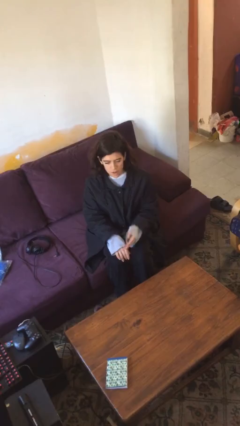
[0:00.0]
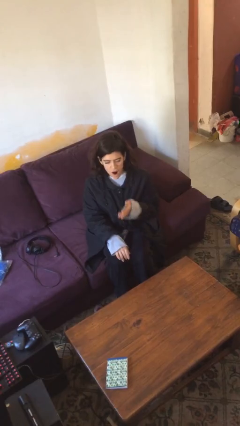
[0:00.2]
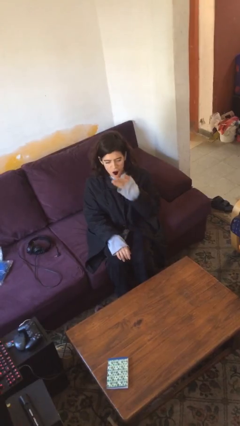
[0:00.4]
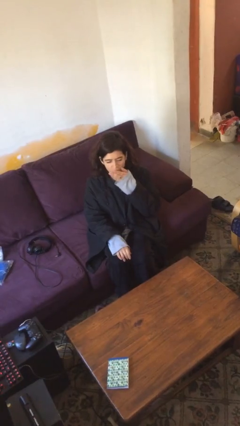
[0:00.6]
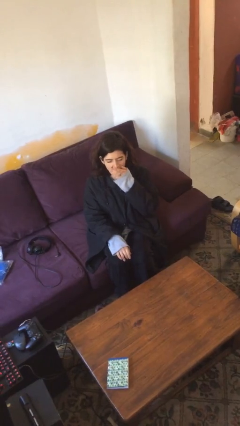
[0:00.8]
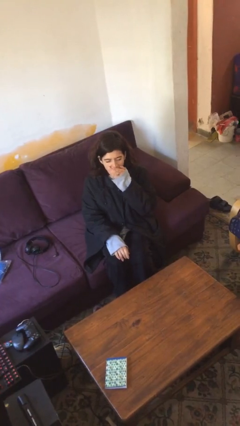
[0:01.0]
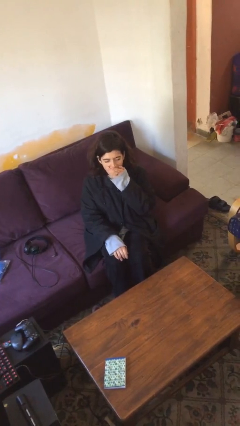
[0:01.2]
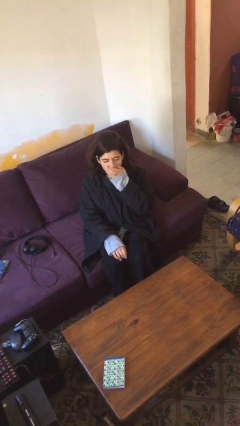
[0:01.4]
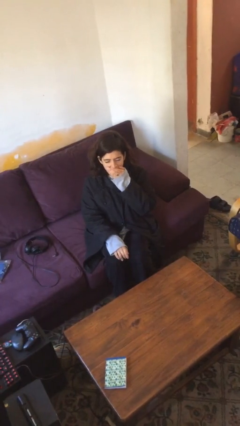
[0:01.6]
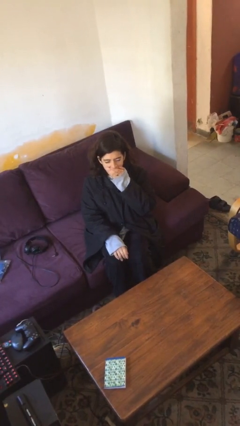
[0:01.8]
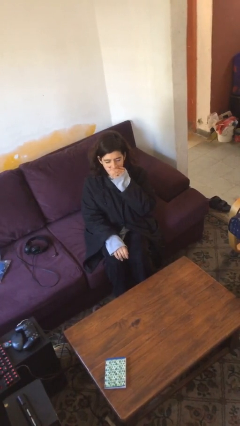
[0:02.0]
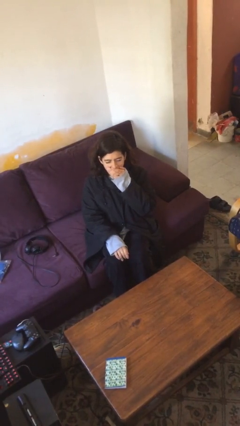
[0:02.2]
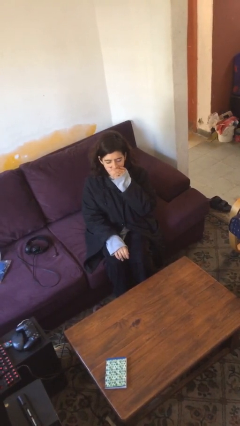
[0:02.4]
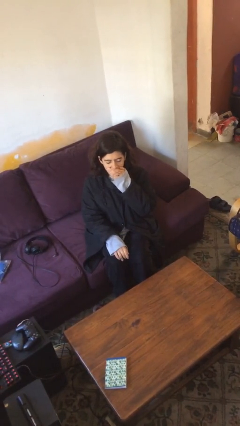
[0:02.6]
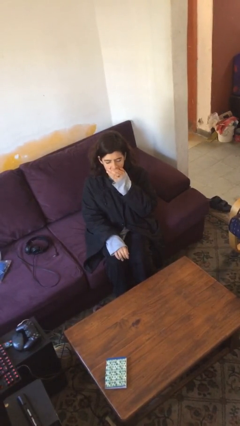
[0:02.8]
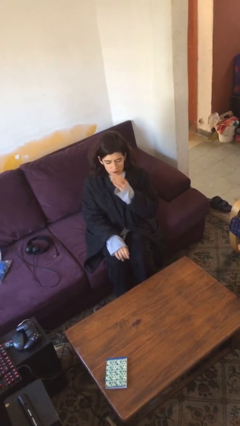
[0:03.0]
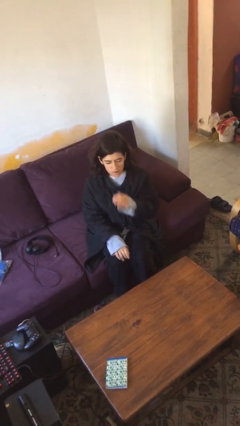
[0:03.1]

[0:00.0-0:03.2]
person yawns

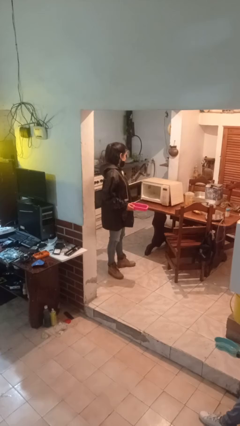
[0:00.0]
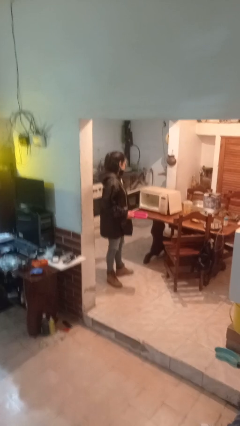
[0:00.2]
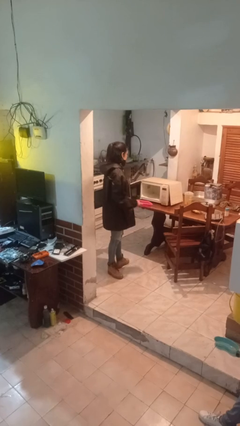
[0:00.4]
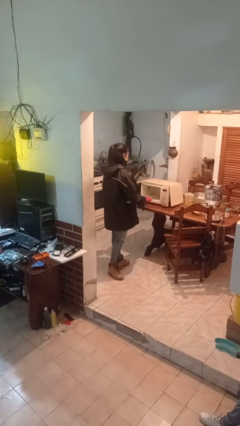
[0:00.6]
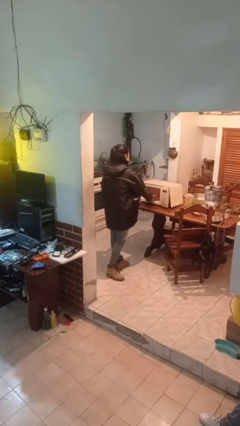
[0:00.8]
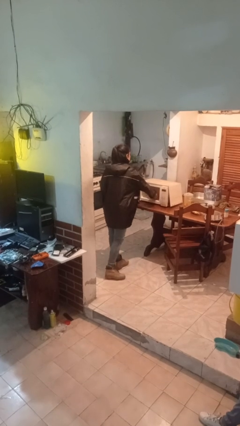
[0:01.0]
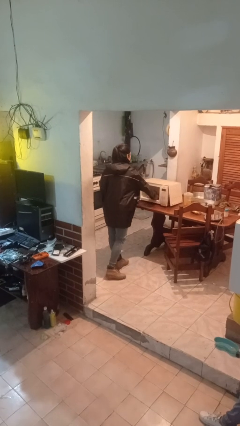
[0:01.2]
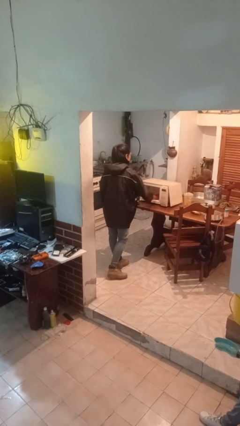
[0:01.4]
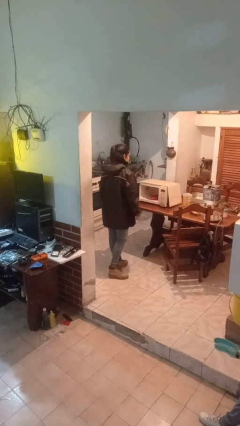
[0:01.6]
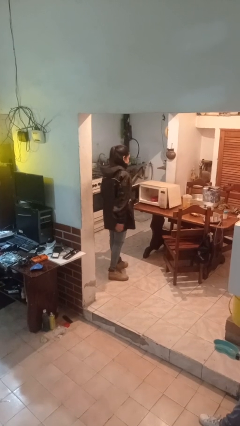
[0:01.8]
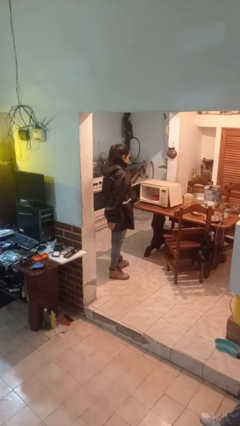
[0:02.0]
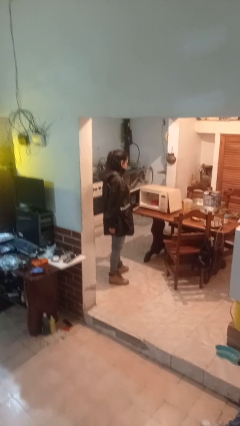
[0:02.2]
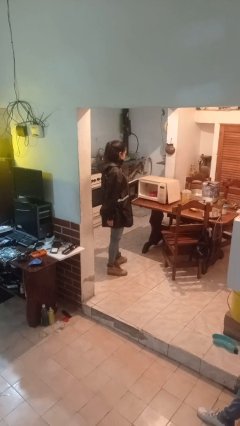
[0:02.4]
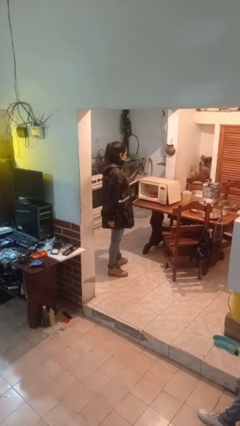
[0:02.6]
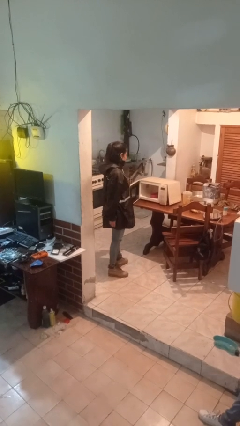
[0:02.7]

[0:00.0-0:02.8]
person dries dish

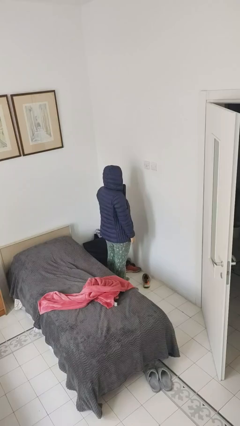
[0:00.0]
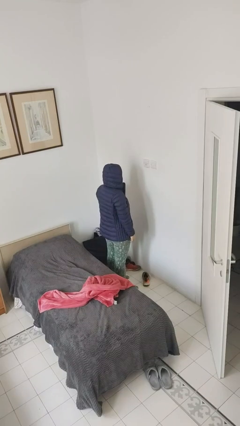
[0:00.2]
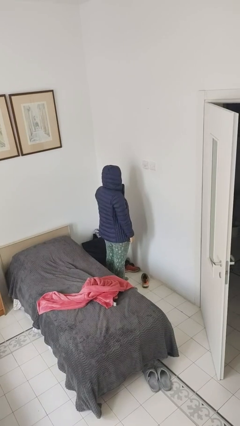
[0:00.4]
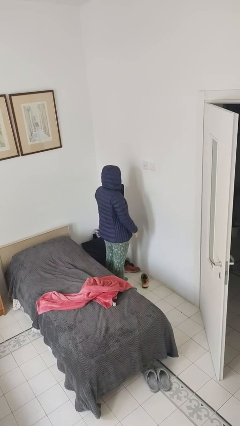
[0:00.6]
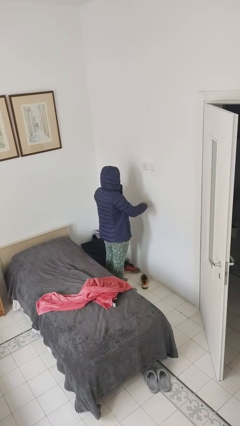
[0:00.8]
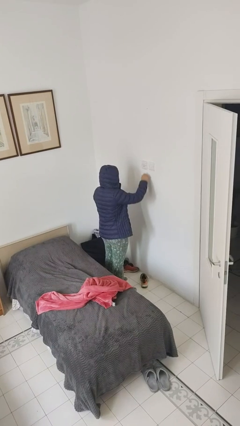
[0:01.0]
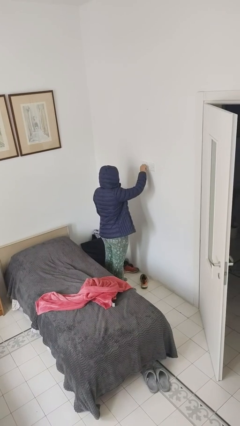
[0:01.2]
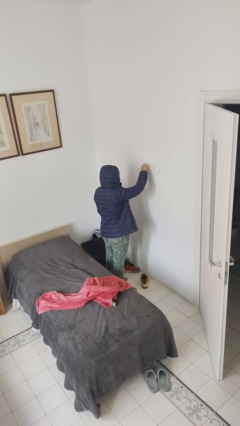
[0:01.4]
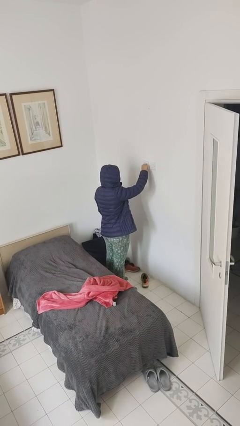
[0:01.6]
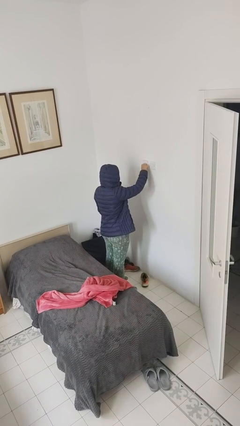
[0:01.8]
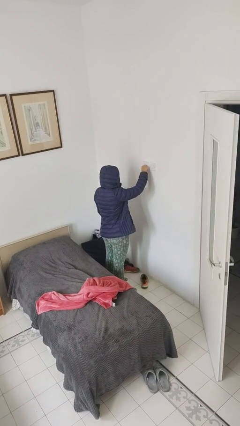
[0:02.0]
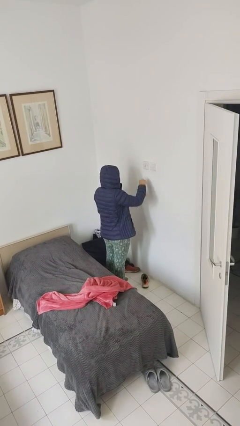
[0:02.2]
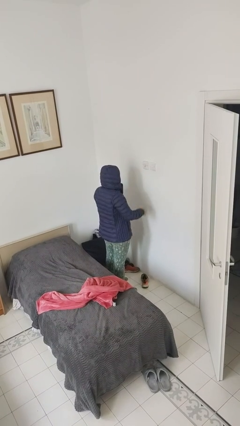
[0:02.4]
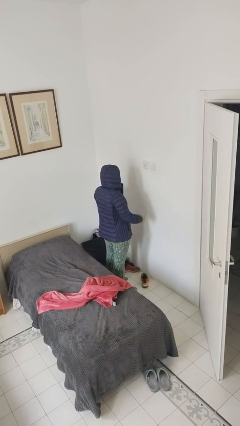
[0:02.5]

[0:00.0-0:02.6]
person turns on fan

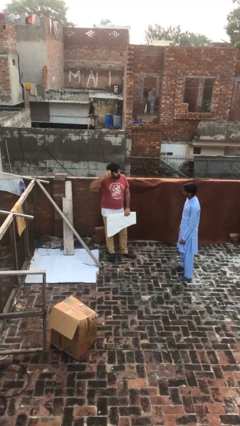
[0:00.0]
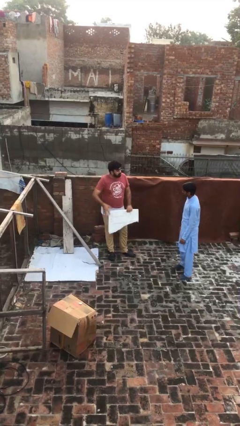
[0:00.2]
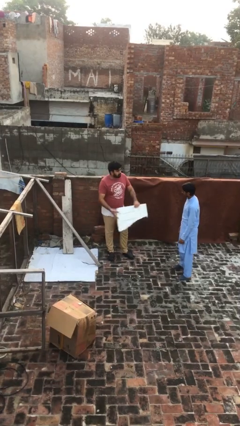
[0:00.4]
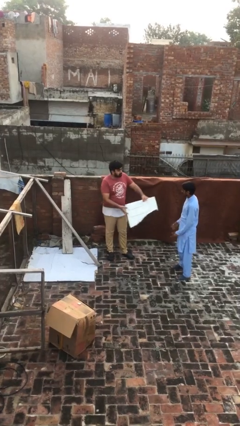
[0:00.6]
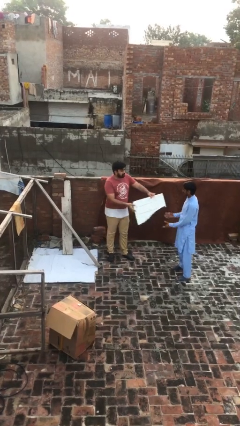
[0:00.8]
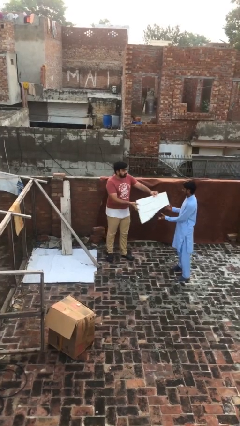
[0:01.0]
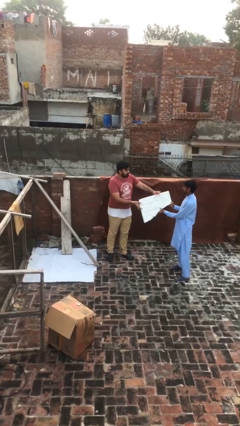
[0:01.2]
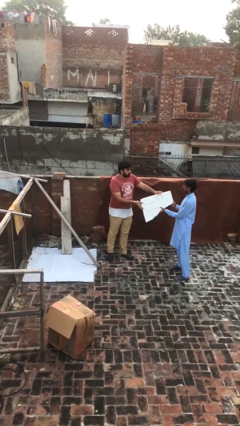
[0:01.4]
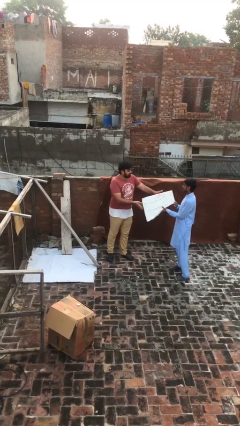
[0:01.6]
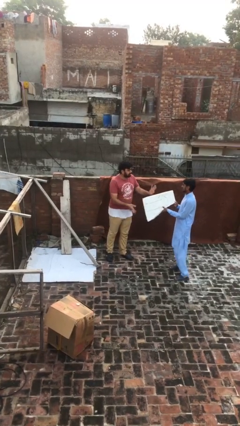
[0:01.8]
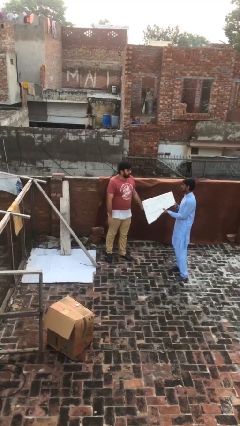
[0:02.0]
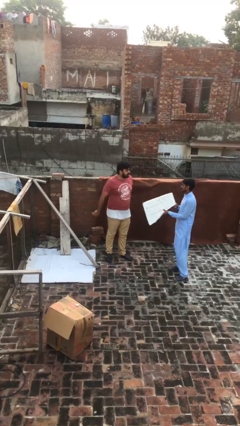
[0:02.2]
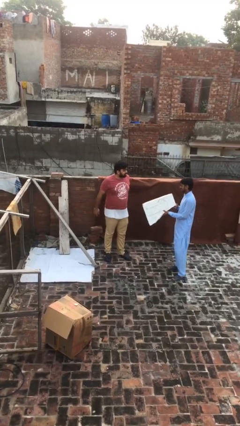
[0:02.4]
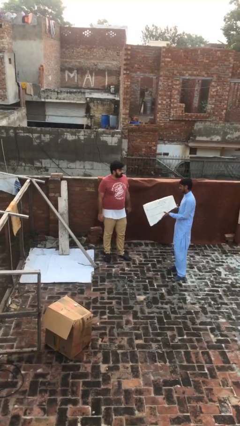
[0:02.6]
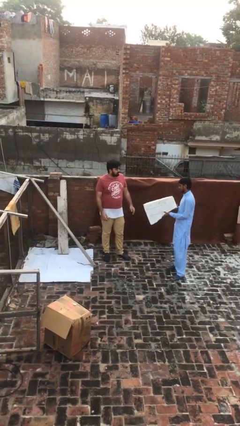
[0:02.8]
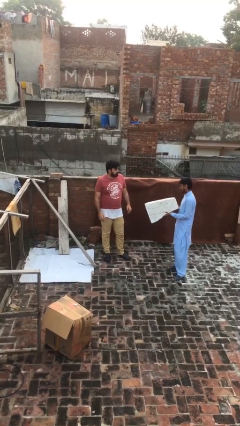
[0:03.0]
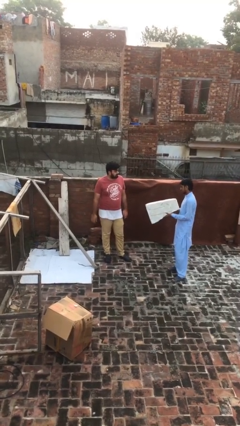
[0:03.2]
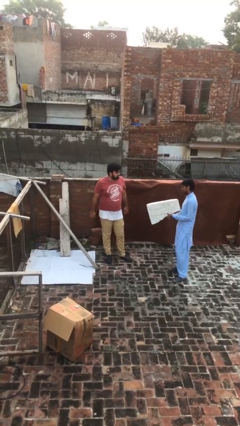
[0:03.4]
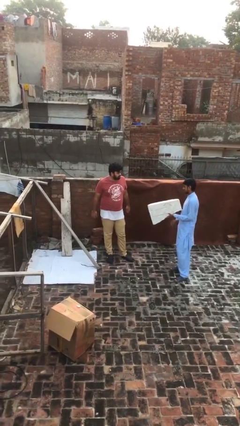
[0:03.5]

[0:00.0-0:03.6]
person transfers object to person

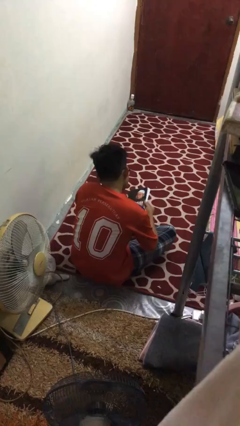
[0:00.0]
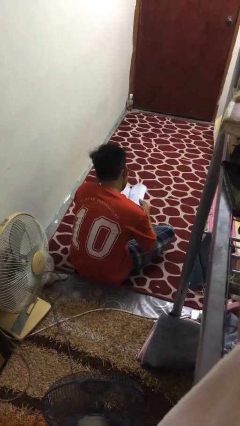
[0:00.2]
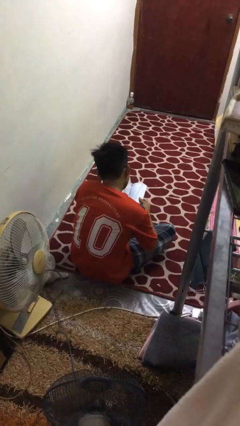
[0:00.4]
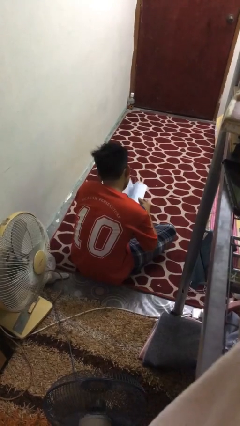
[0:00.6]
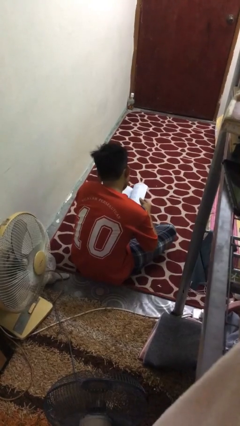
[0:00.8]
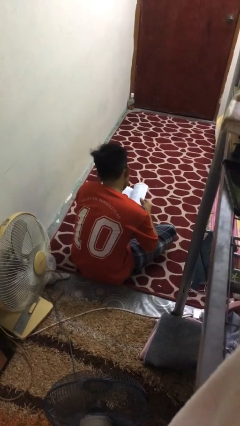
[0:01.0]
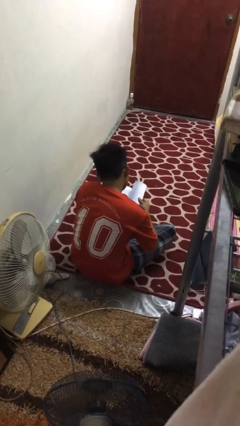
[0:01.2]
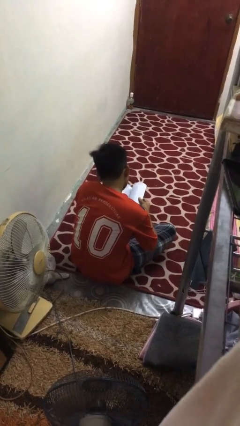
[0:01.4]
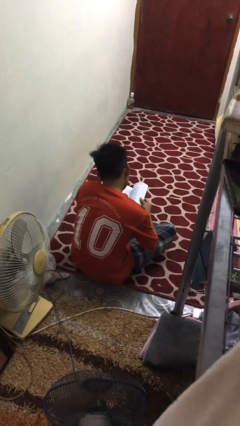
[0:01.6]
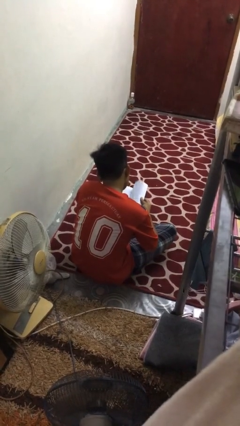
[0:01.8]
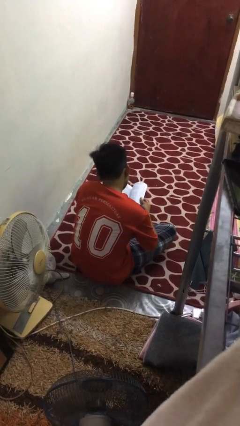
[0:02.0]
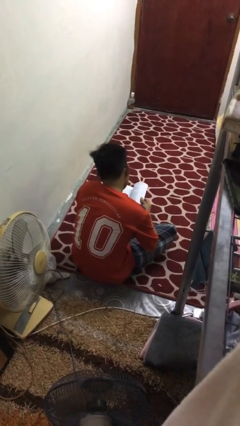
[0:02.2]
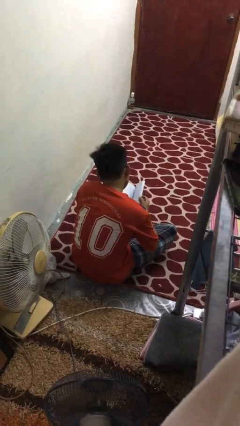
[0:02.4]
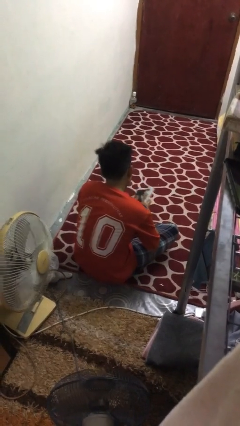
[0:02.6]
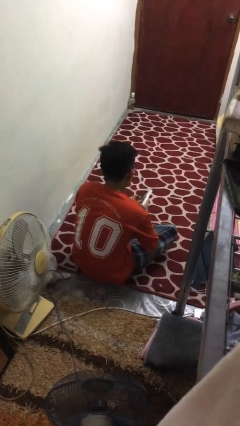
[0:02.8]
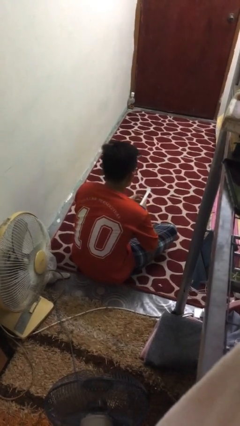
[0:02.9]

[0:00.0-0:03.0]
person reads book

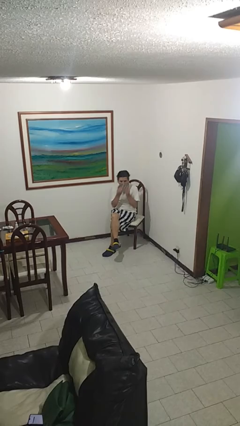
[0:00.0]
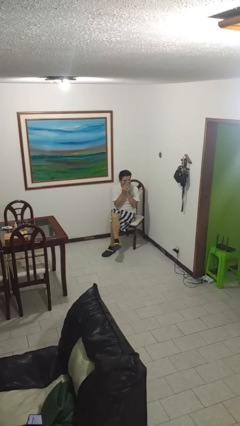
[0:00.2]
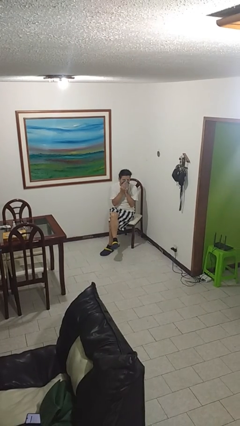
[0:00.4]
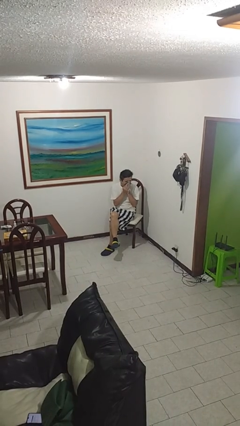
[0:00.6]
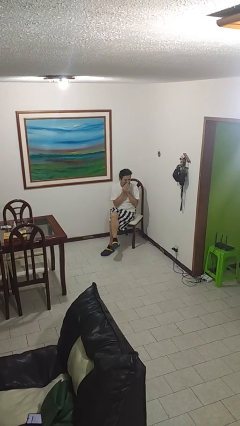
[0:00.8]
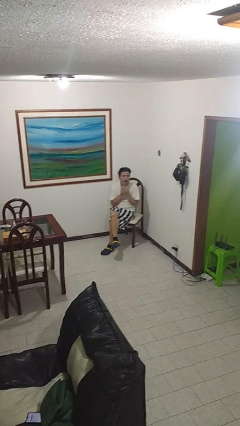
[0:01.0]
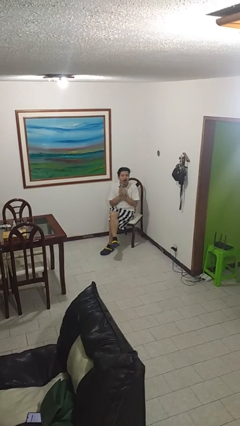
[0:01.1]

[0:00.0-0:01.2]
person blows nose

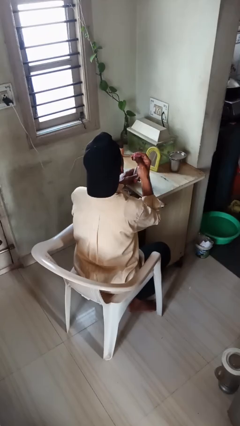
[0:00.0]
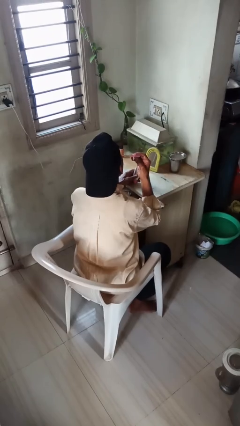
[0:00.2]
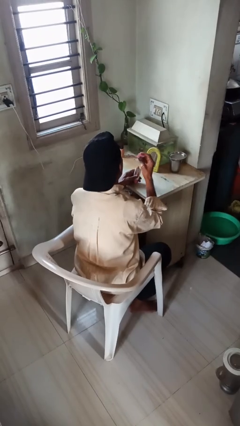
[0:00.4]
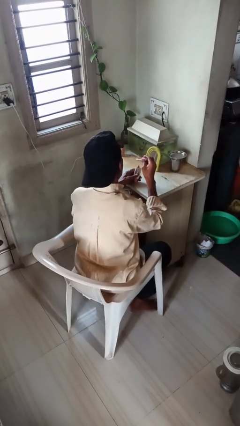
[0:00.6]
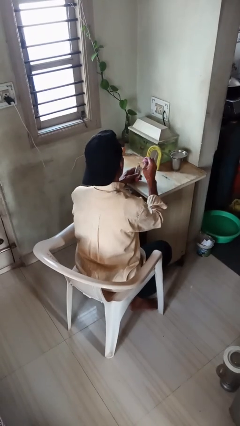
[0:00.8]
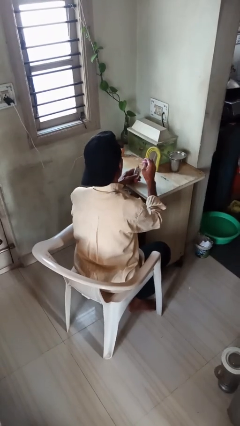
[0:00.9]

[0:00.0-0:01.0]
person applies lip makeup
